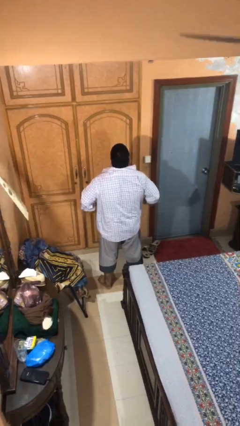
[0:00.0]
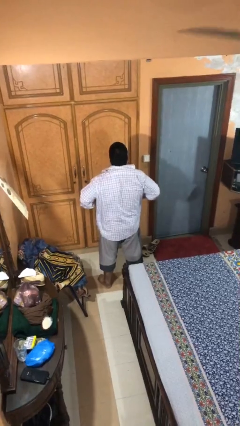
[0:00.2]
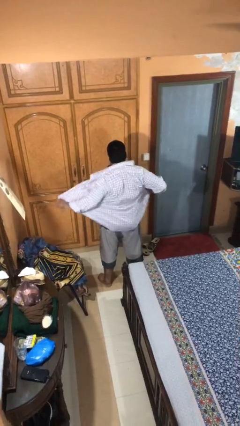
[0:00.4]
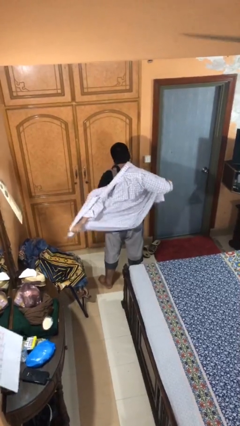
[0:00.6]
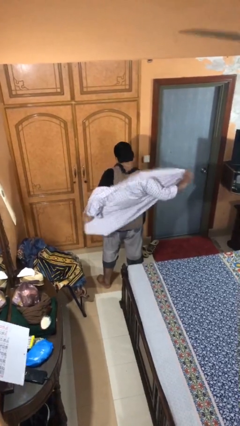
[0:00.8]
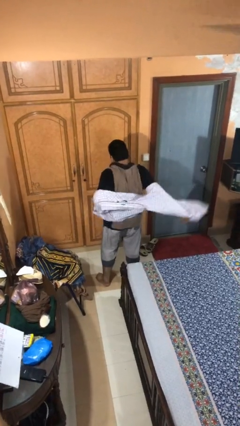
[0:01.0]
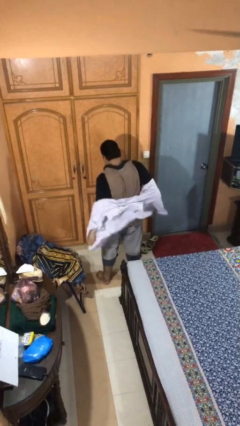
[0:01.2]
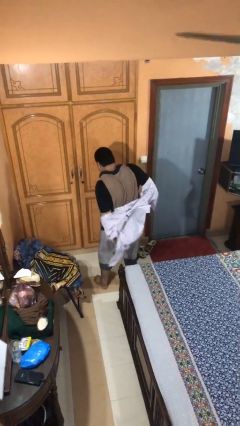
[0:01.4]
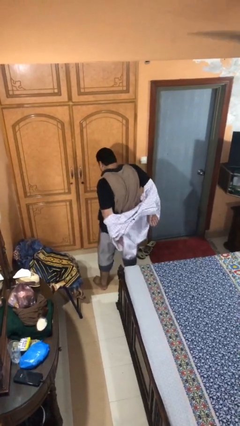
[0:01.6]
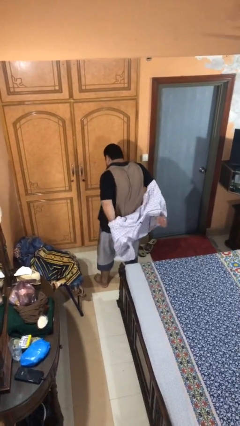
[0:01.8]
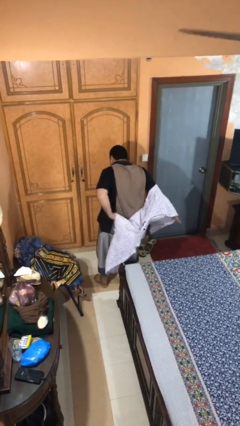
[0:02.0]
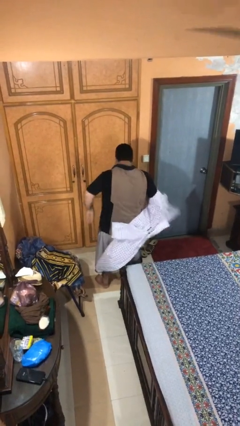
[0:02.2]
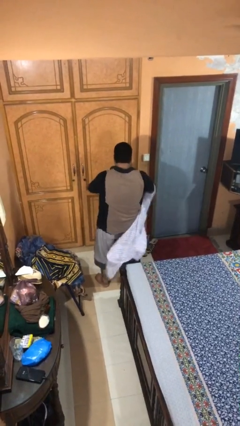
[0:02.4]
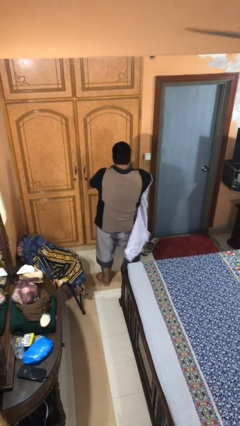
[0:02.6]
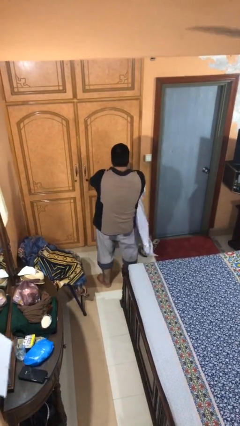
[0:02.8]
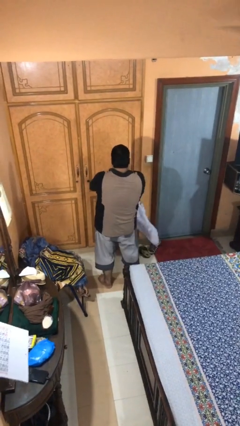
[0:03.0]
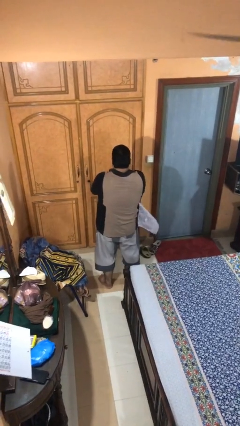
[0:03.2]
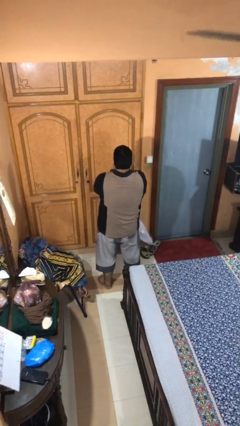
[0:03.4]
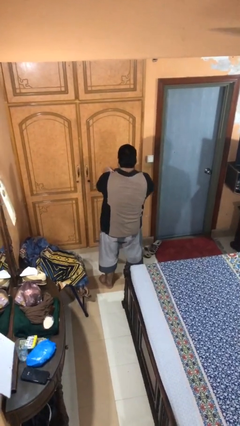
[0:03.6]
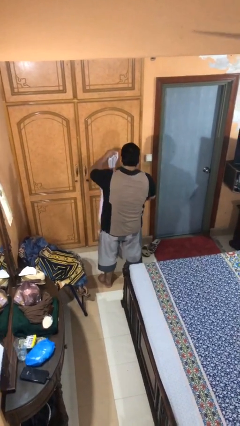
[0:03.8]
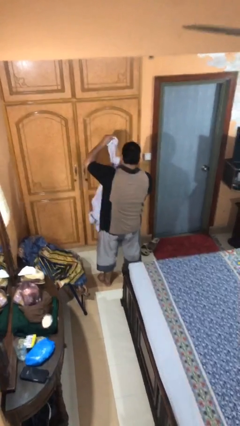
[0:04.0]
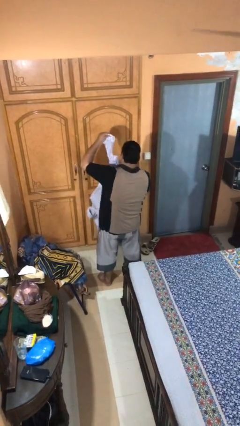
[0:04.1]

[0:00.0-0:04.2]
person takes off shirt

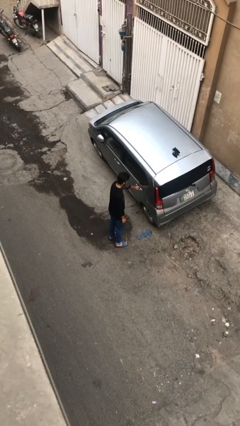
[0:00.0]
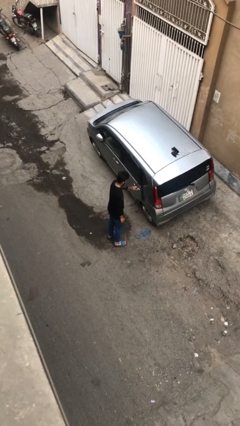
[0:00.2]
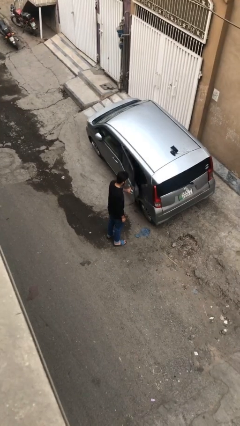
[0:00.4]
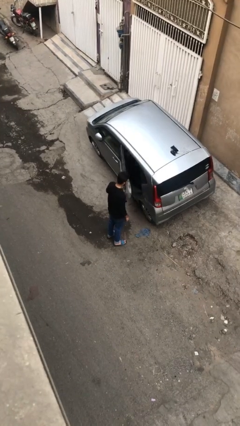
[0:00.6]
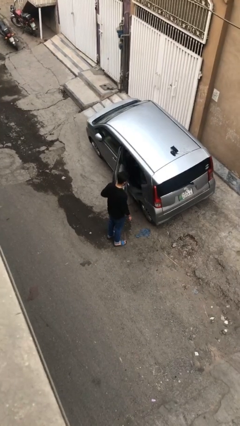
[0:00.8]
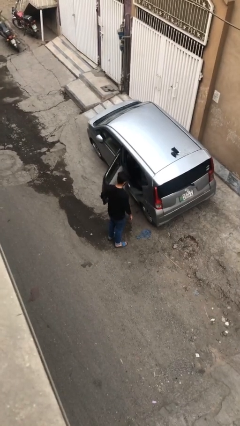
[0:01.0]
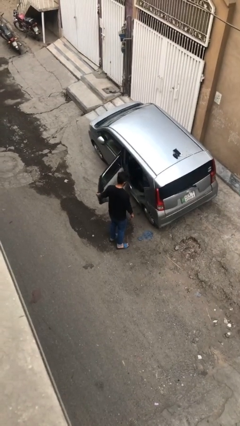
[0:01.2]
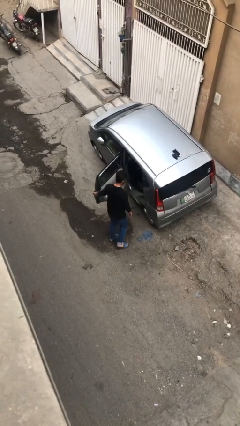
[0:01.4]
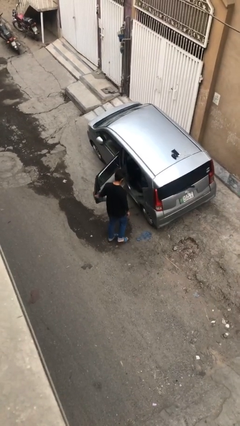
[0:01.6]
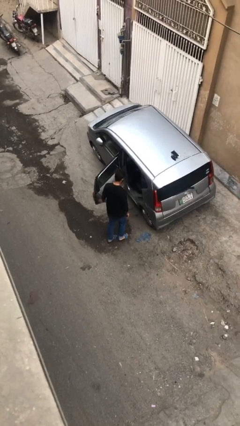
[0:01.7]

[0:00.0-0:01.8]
person opens car door

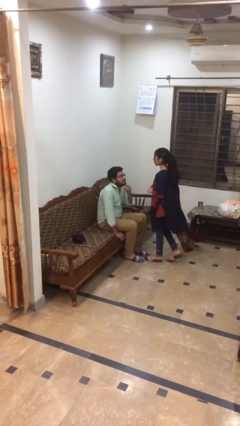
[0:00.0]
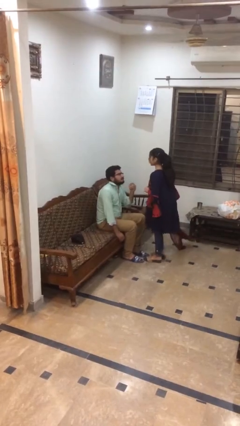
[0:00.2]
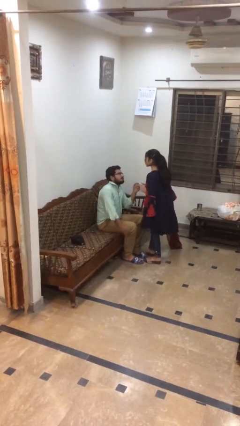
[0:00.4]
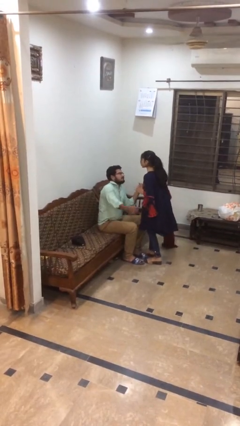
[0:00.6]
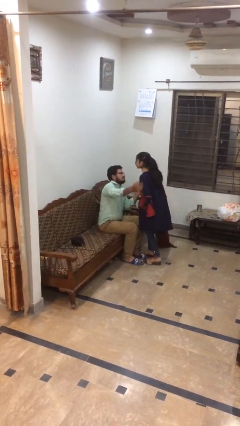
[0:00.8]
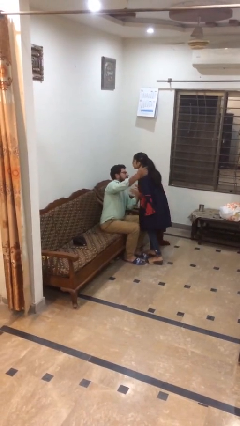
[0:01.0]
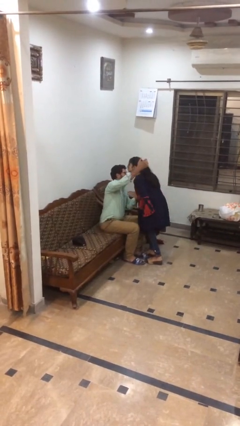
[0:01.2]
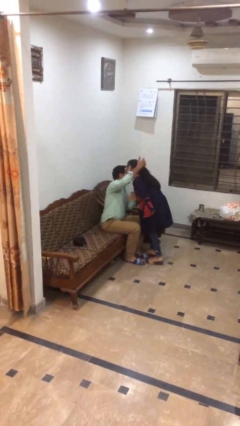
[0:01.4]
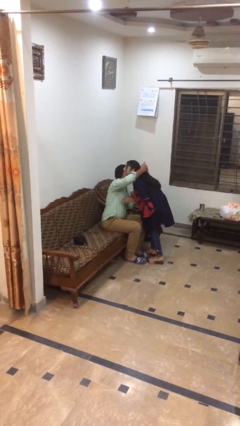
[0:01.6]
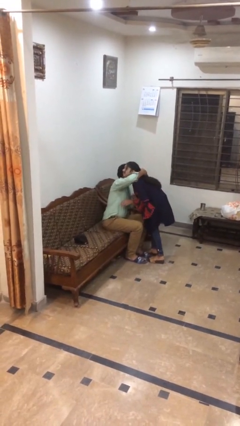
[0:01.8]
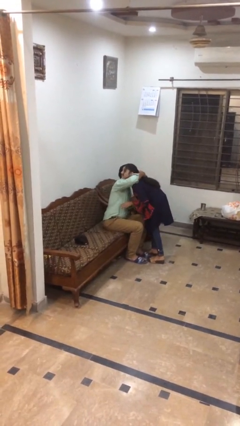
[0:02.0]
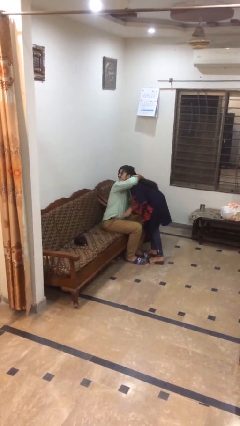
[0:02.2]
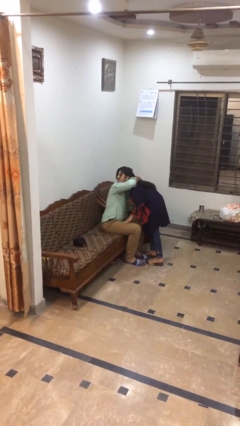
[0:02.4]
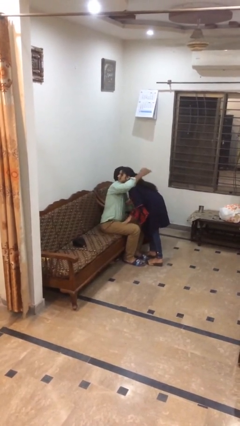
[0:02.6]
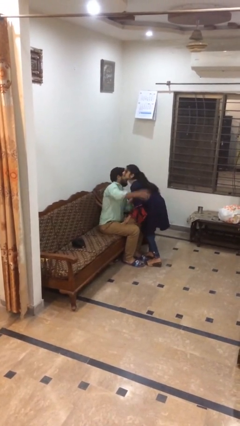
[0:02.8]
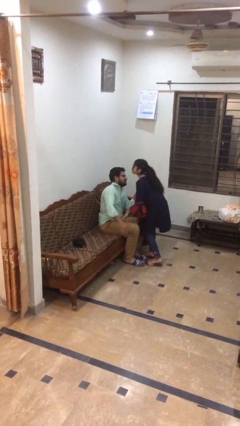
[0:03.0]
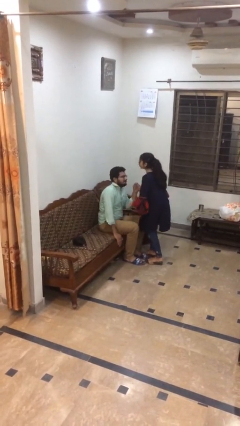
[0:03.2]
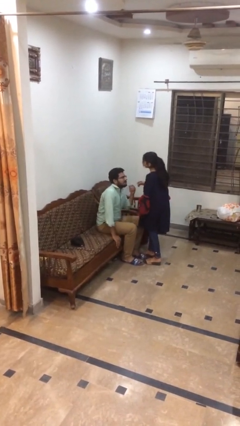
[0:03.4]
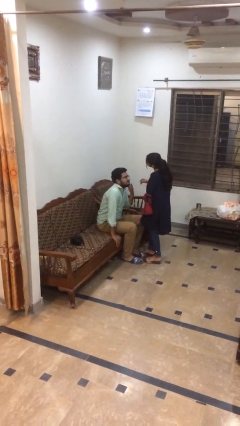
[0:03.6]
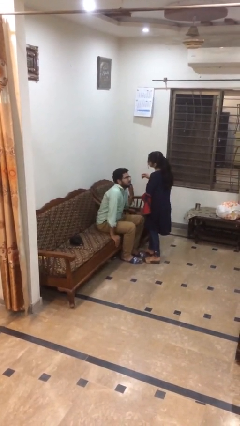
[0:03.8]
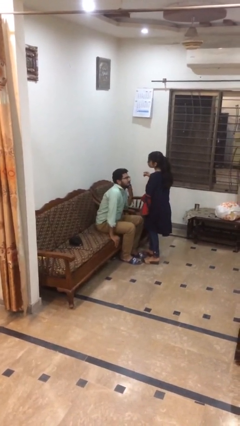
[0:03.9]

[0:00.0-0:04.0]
person embraces person

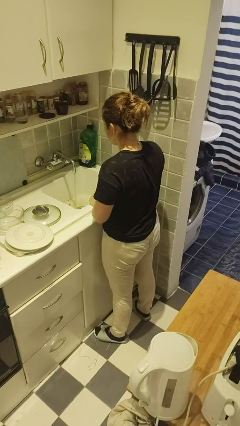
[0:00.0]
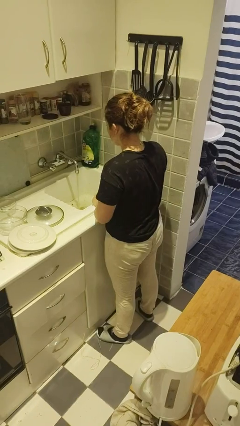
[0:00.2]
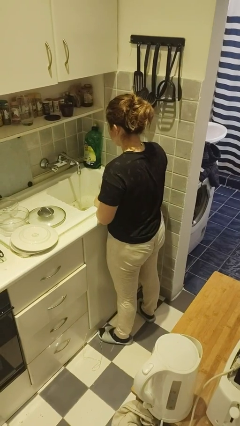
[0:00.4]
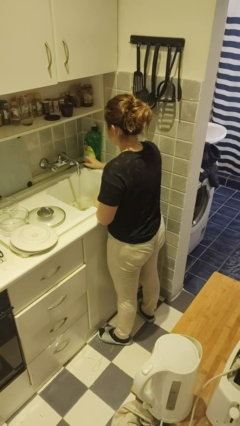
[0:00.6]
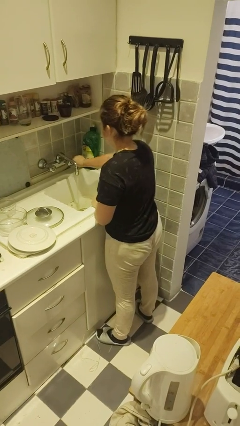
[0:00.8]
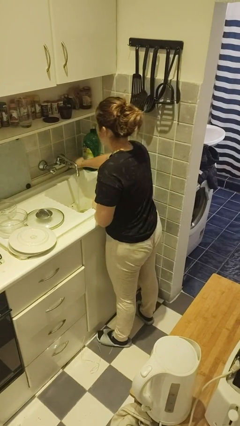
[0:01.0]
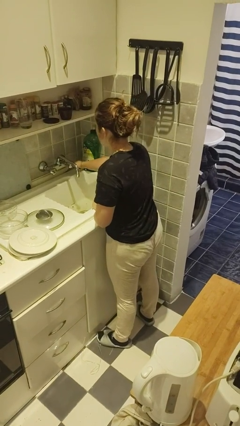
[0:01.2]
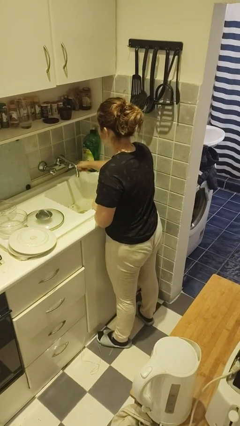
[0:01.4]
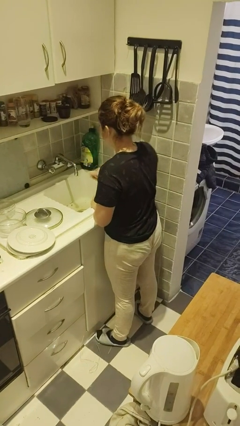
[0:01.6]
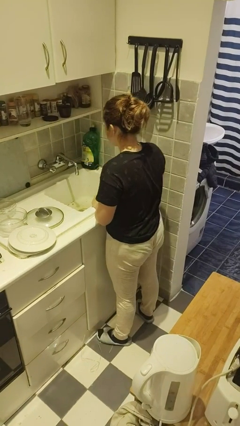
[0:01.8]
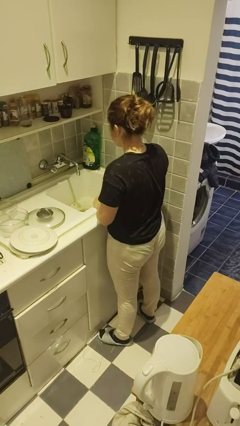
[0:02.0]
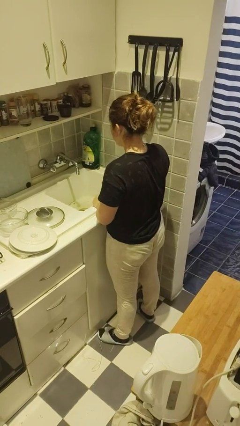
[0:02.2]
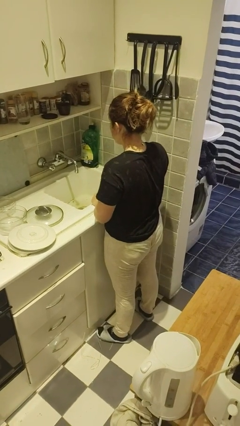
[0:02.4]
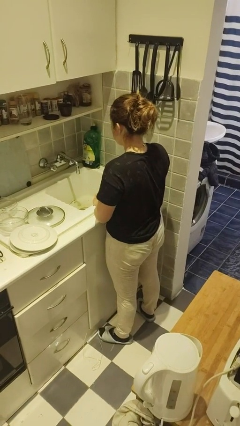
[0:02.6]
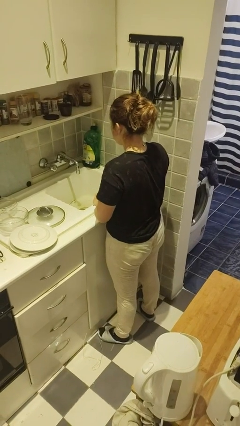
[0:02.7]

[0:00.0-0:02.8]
person turns off faucet

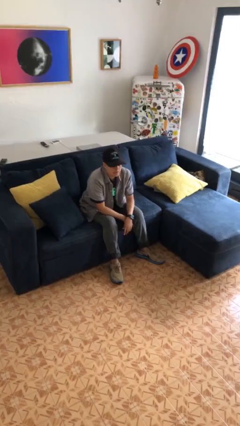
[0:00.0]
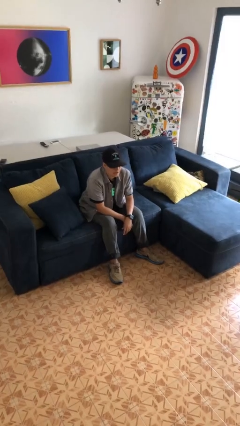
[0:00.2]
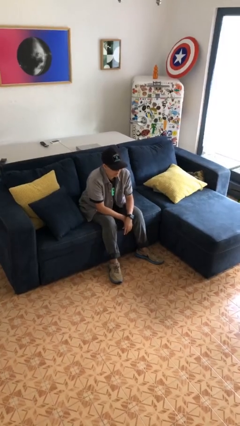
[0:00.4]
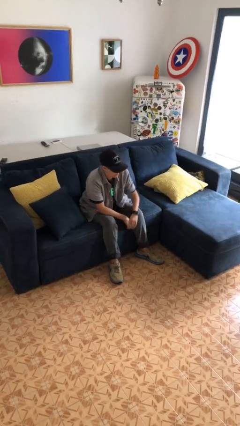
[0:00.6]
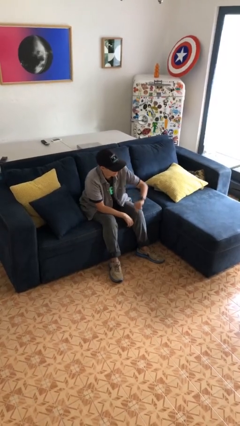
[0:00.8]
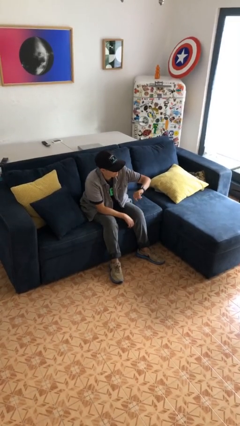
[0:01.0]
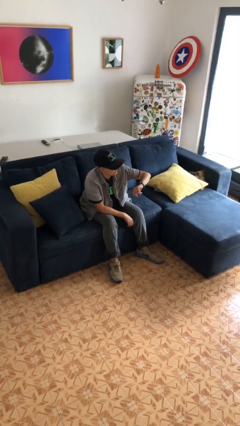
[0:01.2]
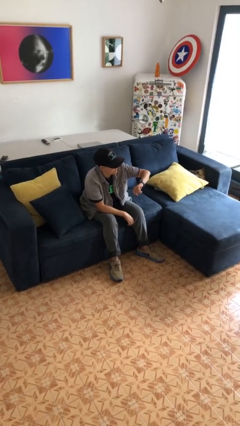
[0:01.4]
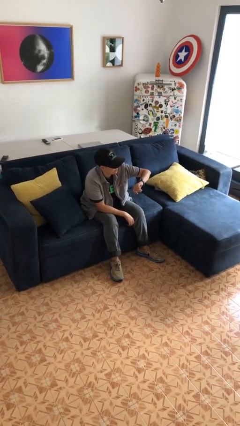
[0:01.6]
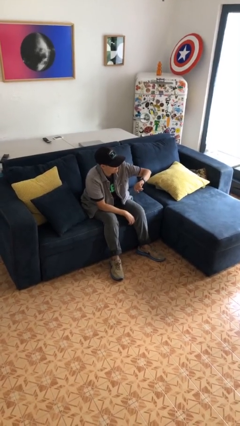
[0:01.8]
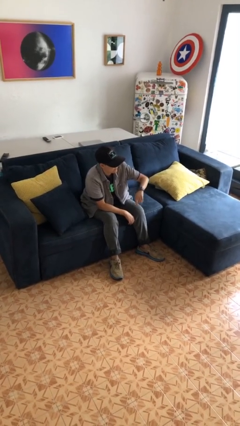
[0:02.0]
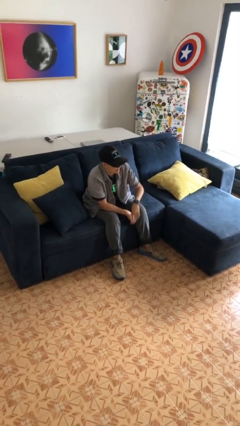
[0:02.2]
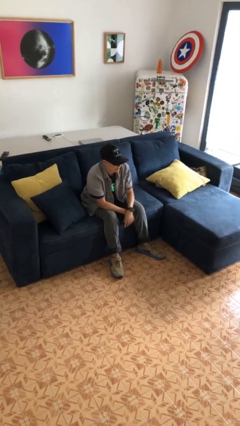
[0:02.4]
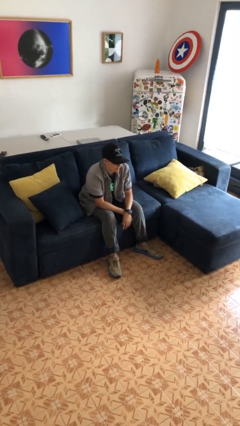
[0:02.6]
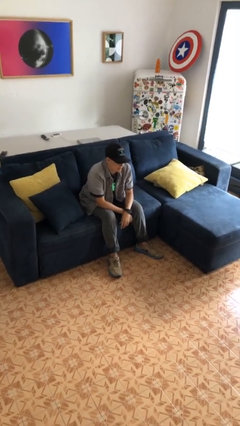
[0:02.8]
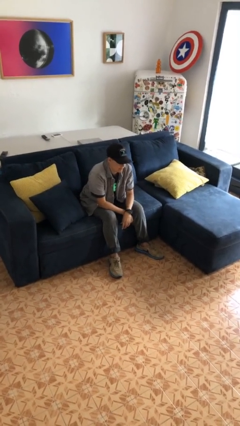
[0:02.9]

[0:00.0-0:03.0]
person looks at wristwatch

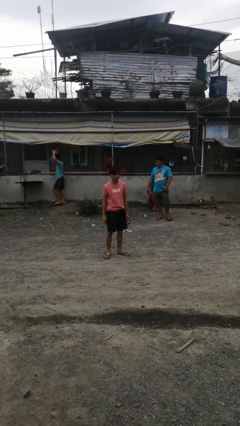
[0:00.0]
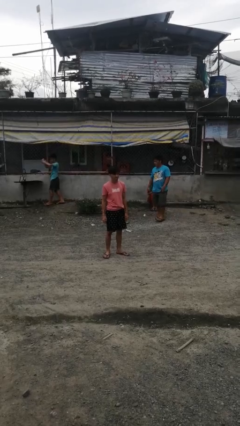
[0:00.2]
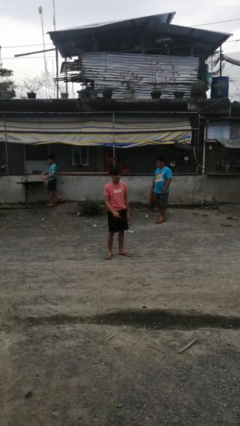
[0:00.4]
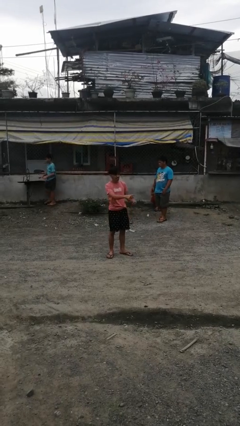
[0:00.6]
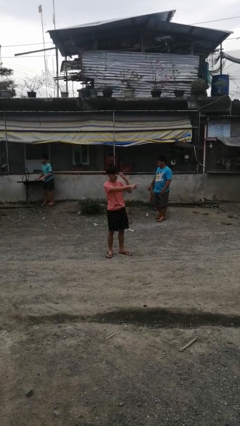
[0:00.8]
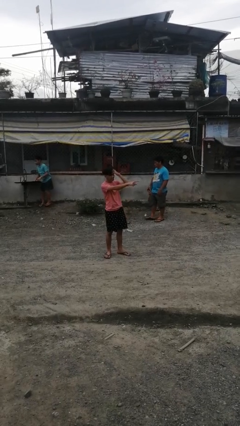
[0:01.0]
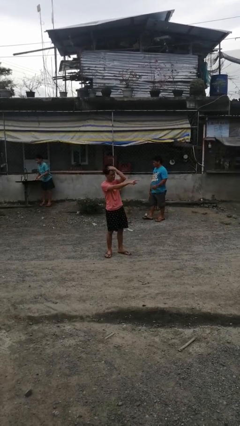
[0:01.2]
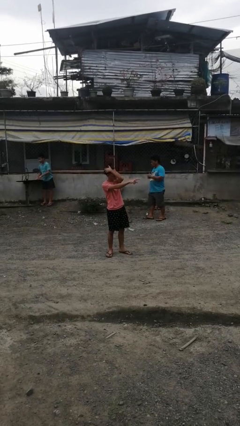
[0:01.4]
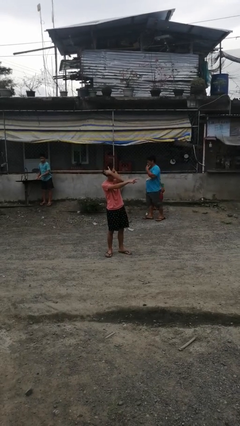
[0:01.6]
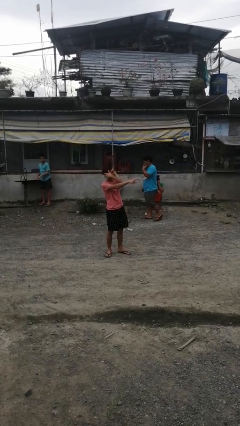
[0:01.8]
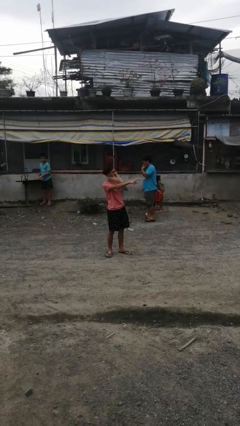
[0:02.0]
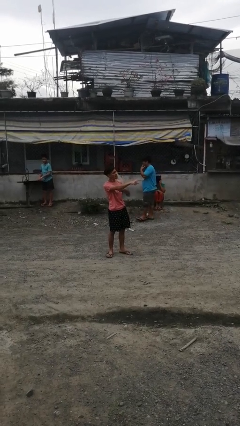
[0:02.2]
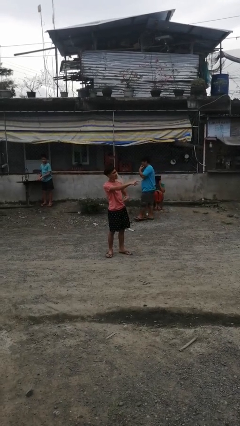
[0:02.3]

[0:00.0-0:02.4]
person points at person
